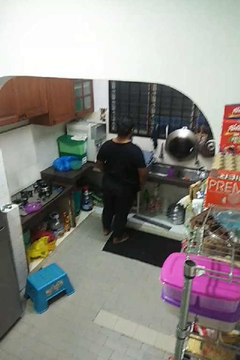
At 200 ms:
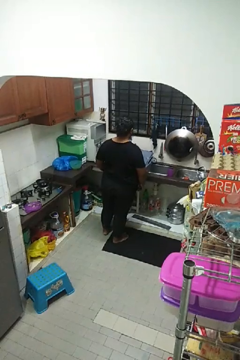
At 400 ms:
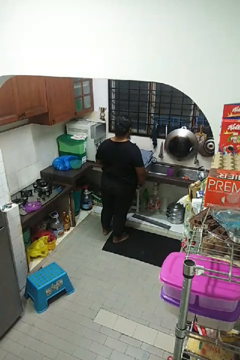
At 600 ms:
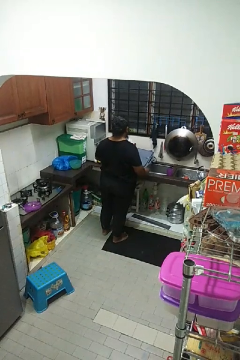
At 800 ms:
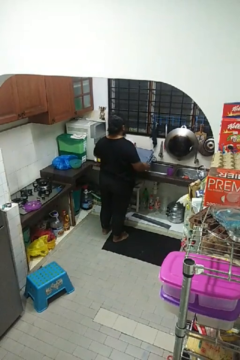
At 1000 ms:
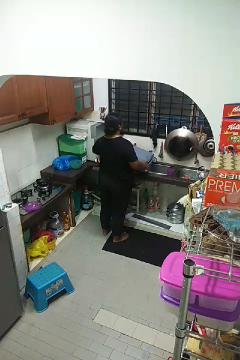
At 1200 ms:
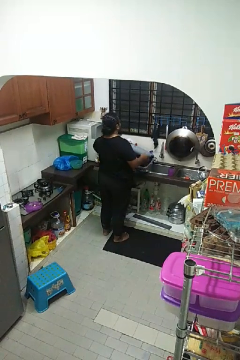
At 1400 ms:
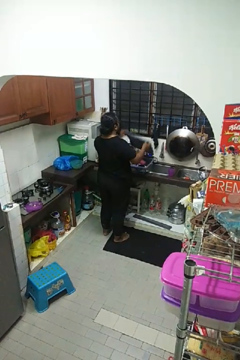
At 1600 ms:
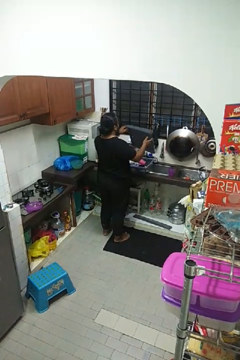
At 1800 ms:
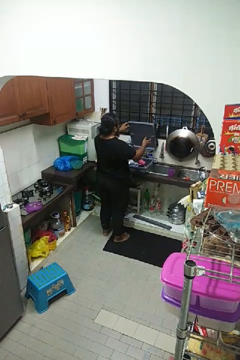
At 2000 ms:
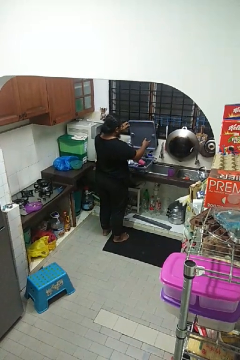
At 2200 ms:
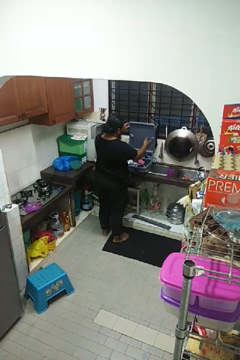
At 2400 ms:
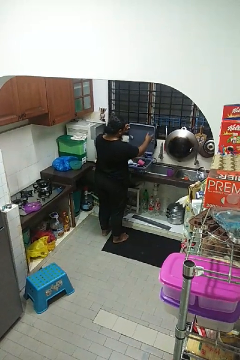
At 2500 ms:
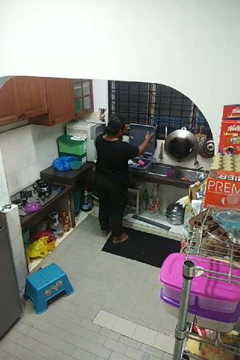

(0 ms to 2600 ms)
person opens dishwasher

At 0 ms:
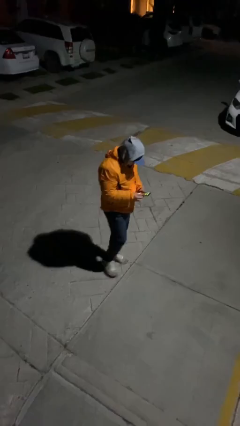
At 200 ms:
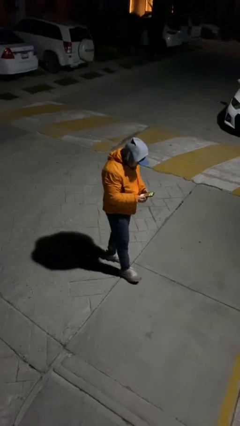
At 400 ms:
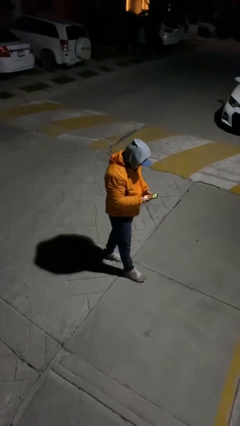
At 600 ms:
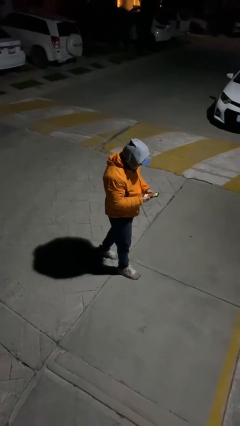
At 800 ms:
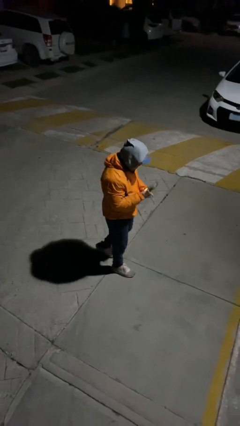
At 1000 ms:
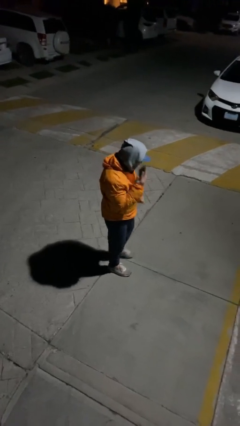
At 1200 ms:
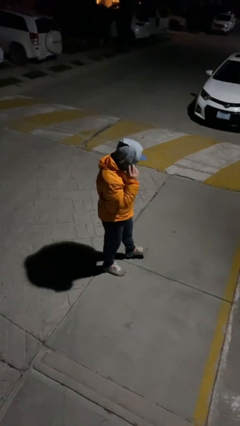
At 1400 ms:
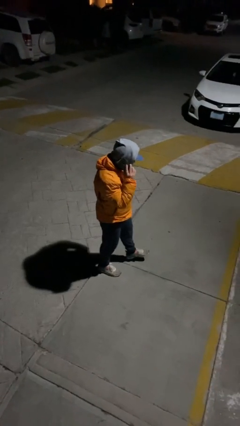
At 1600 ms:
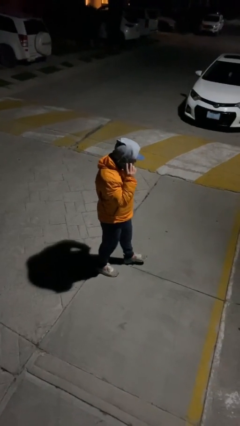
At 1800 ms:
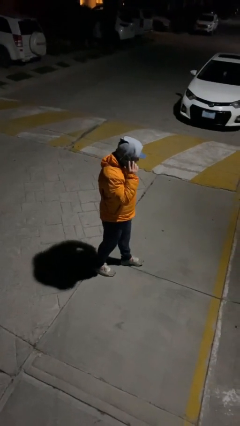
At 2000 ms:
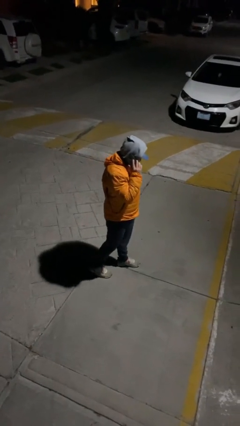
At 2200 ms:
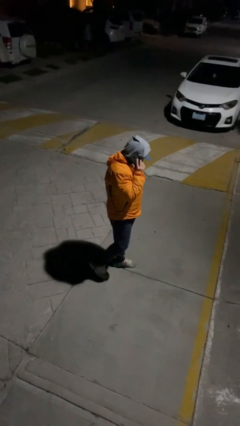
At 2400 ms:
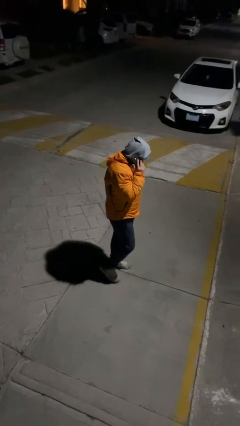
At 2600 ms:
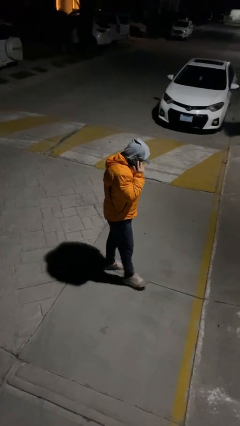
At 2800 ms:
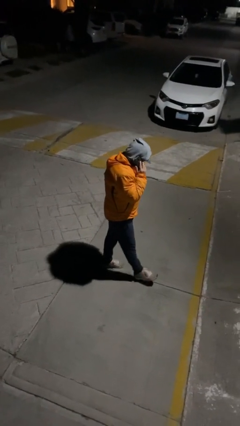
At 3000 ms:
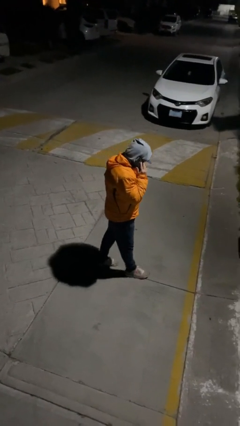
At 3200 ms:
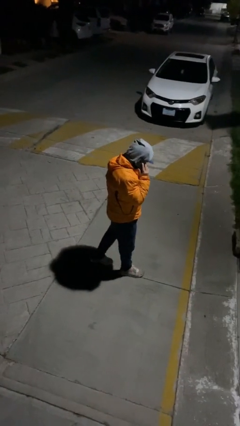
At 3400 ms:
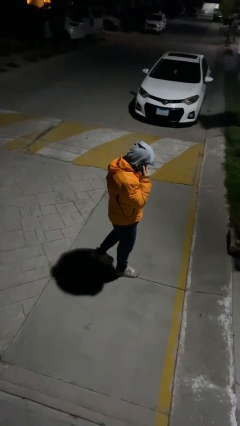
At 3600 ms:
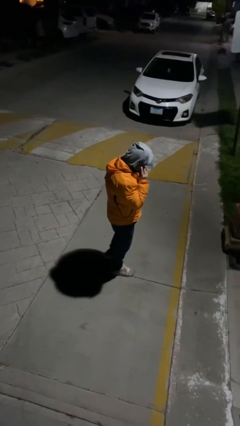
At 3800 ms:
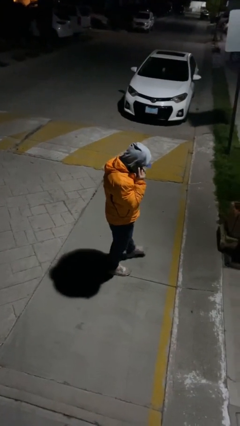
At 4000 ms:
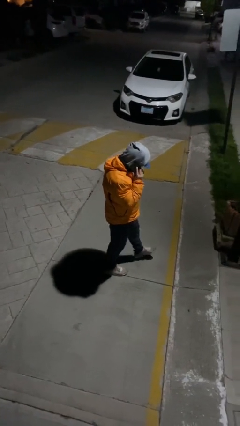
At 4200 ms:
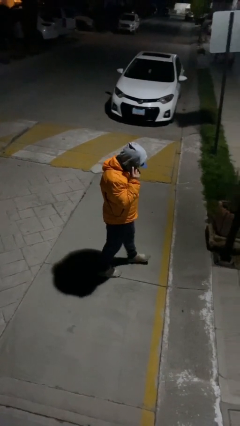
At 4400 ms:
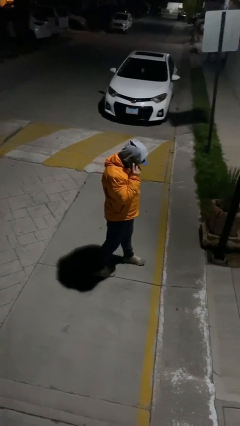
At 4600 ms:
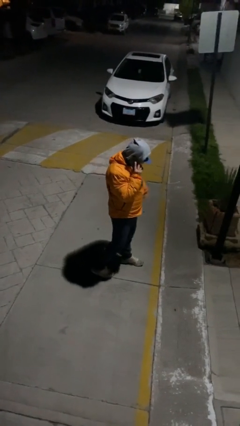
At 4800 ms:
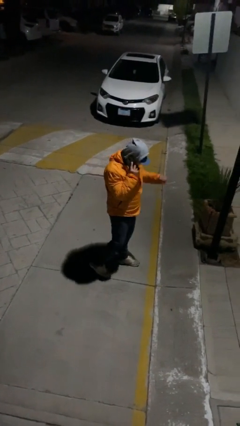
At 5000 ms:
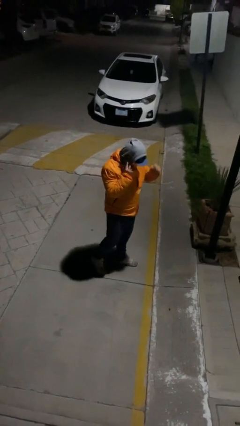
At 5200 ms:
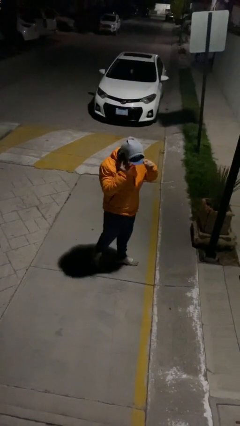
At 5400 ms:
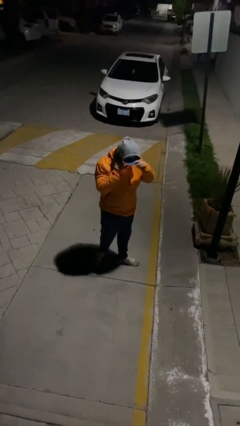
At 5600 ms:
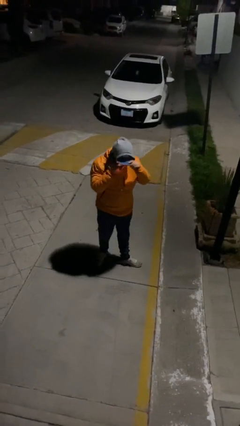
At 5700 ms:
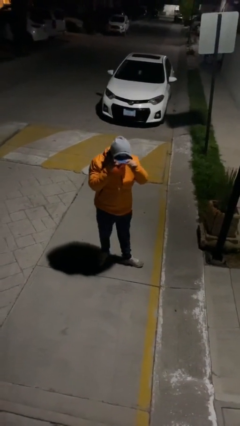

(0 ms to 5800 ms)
person talks on phone

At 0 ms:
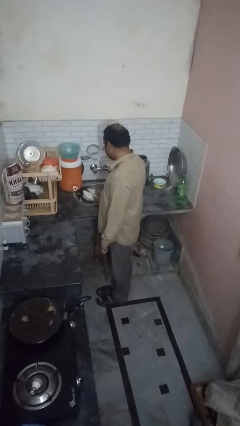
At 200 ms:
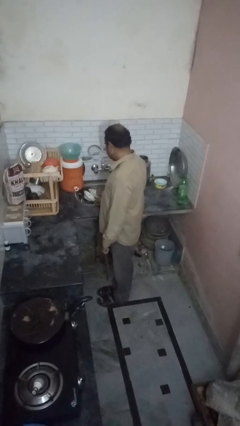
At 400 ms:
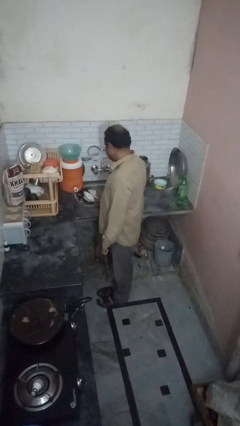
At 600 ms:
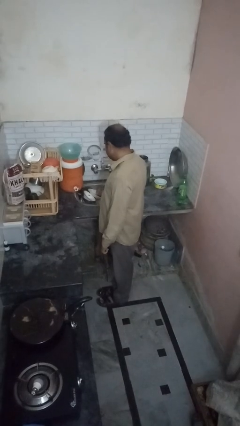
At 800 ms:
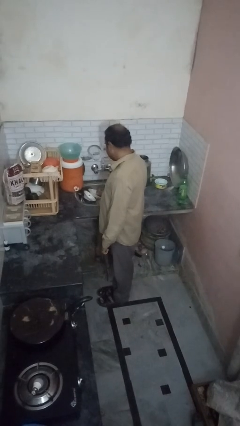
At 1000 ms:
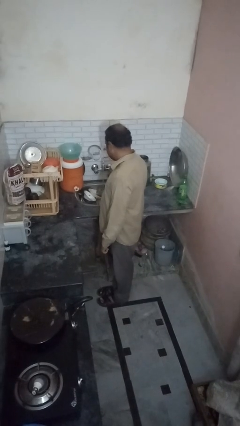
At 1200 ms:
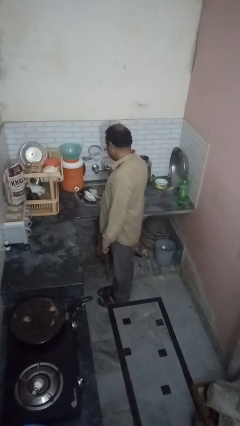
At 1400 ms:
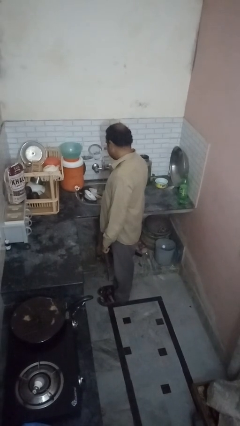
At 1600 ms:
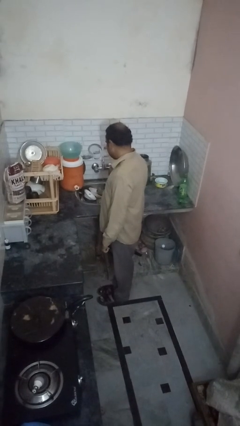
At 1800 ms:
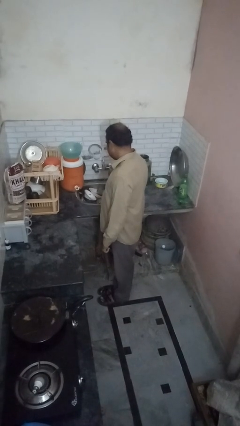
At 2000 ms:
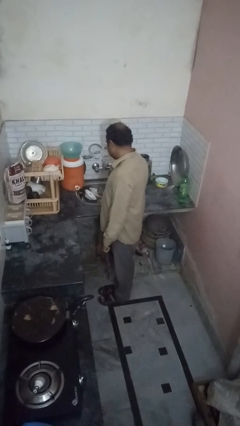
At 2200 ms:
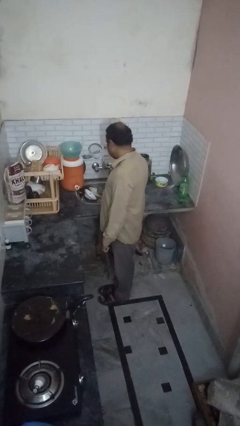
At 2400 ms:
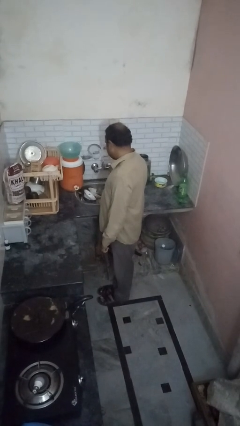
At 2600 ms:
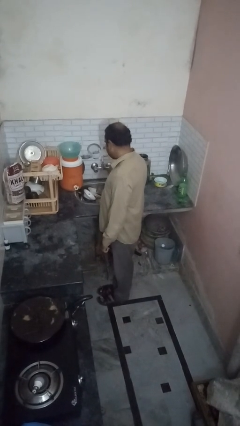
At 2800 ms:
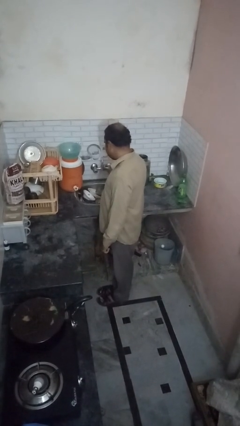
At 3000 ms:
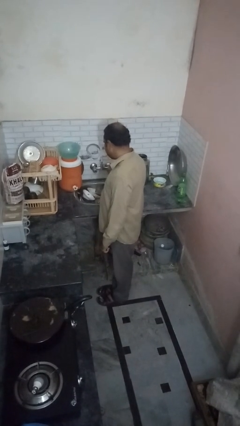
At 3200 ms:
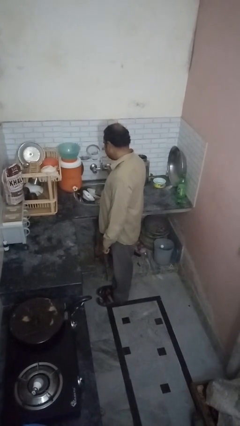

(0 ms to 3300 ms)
person closes dishwasher

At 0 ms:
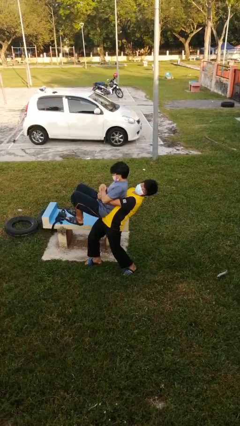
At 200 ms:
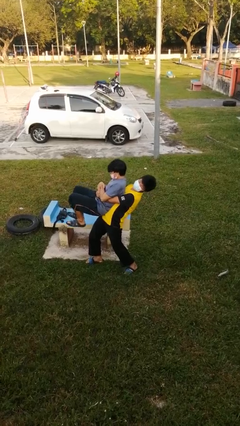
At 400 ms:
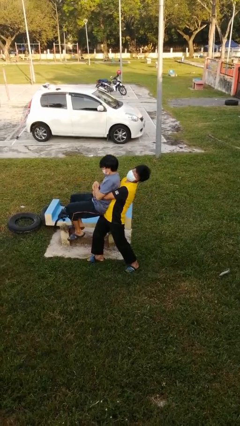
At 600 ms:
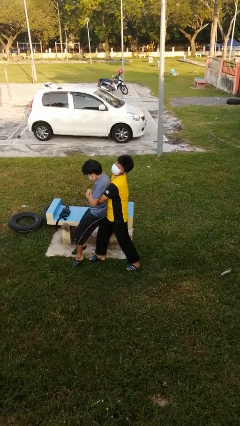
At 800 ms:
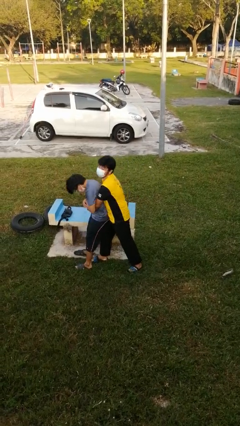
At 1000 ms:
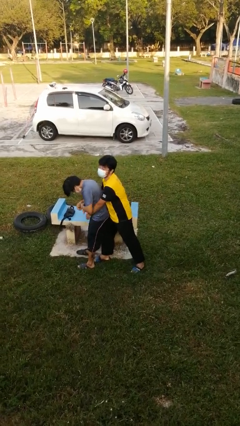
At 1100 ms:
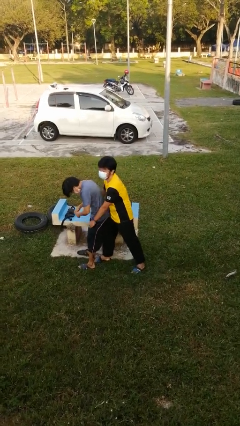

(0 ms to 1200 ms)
person puts down person

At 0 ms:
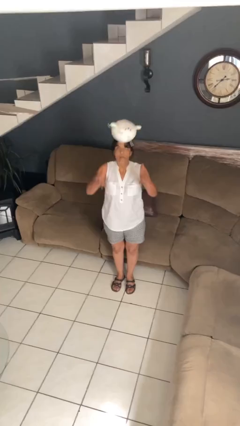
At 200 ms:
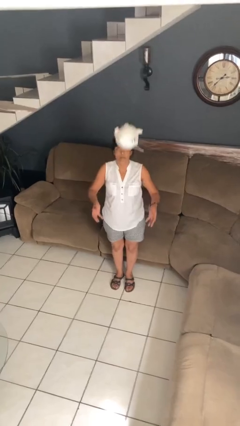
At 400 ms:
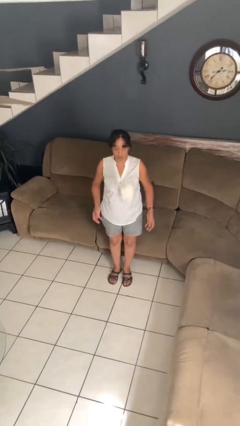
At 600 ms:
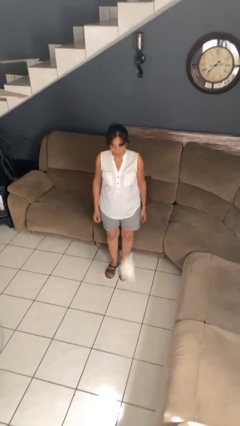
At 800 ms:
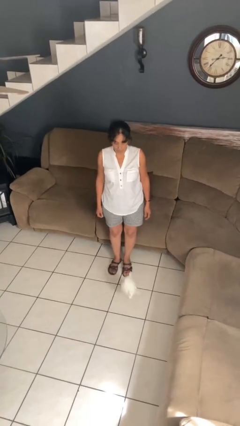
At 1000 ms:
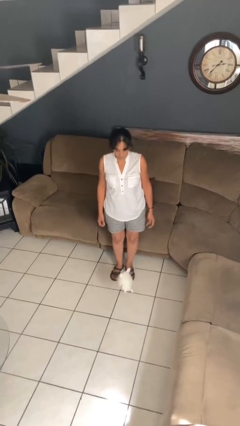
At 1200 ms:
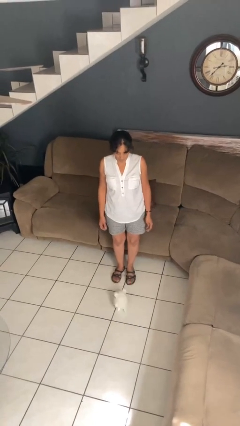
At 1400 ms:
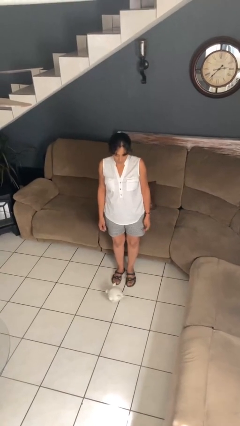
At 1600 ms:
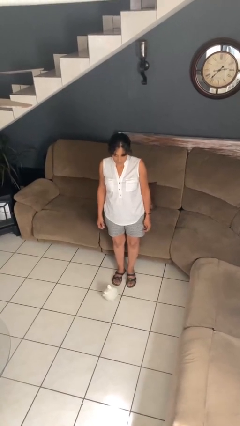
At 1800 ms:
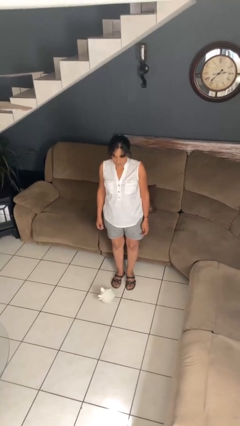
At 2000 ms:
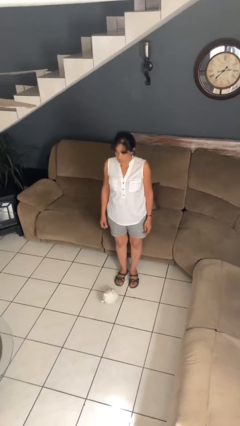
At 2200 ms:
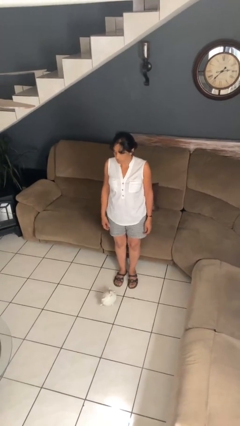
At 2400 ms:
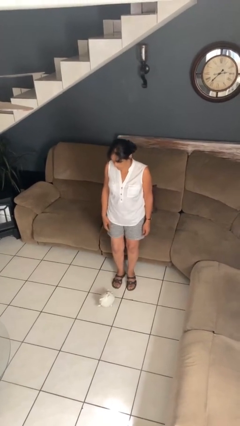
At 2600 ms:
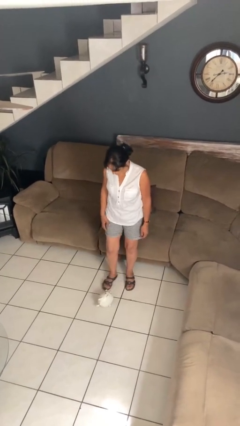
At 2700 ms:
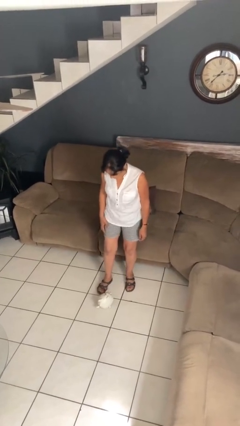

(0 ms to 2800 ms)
person throws object into air

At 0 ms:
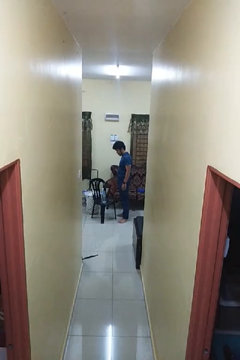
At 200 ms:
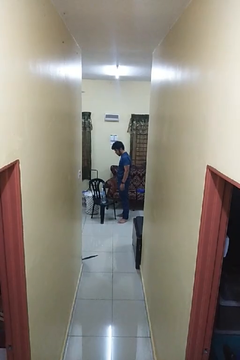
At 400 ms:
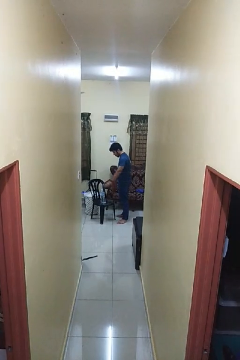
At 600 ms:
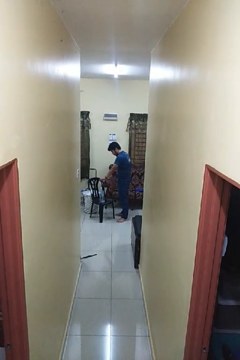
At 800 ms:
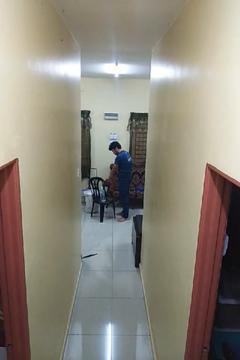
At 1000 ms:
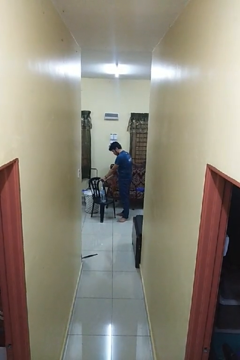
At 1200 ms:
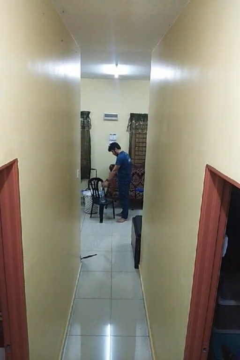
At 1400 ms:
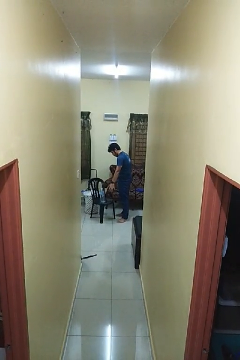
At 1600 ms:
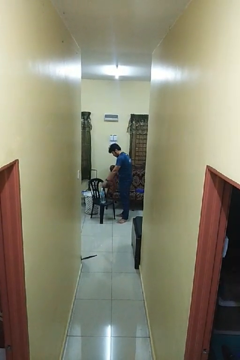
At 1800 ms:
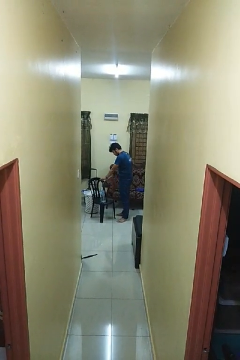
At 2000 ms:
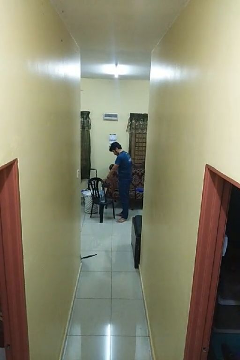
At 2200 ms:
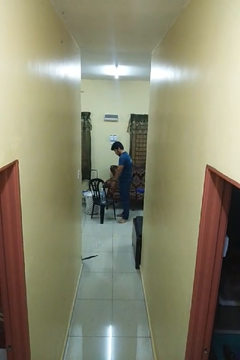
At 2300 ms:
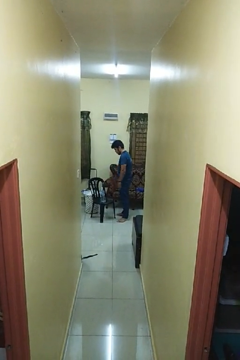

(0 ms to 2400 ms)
person waves hand over object

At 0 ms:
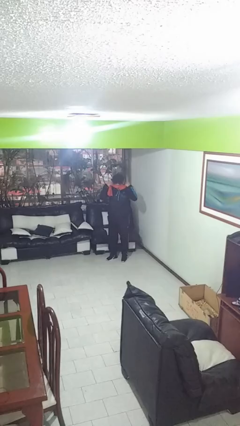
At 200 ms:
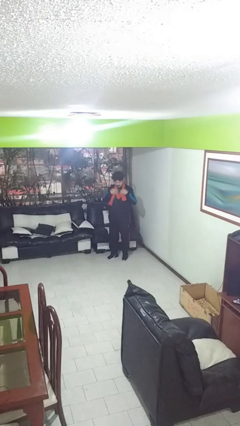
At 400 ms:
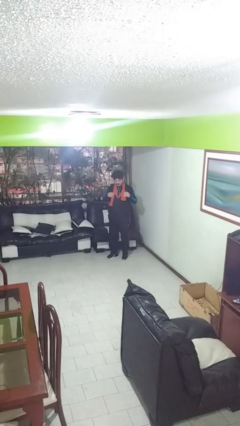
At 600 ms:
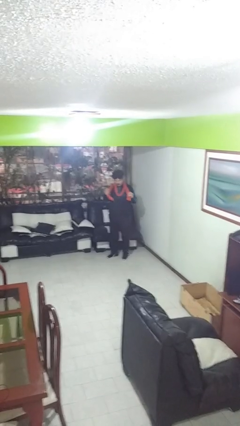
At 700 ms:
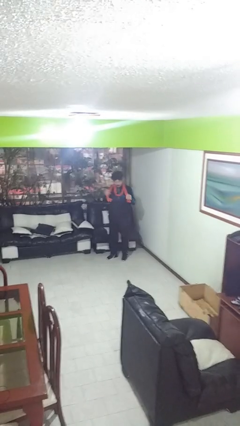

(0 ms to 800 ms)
person puts on scarf
